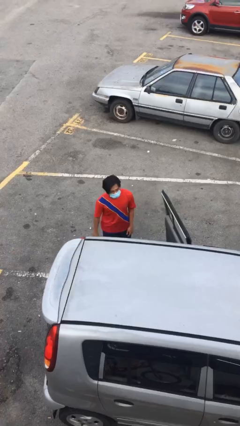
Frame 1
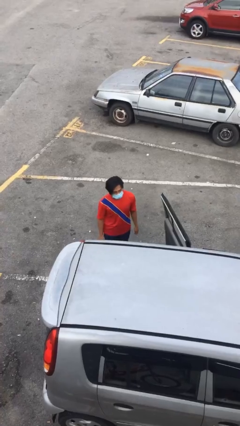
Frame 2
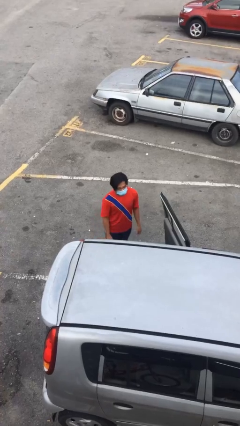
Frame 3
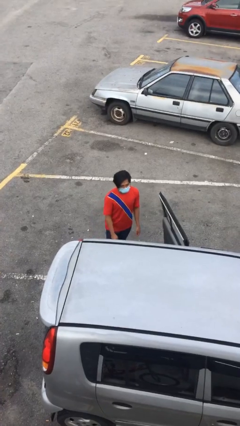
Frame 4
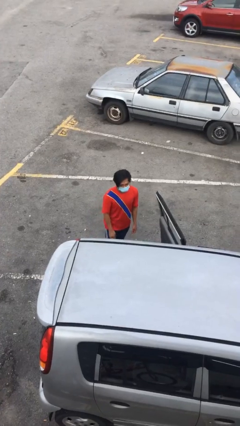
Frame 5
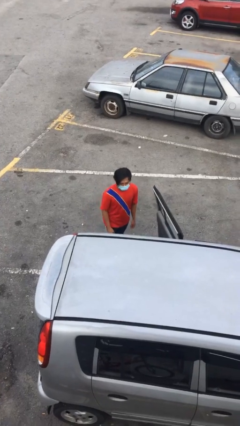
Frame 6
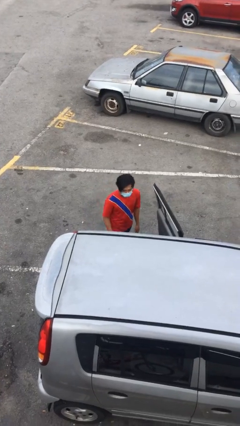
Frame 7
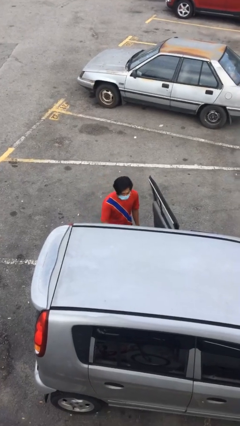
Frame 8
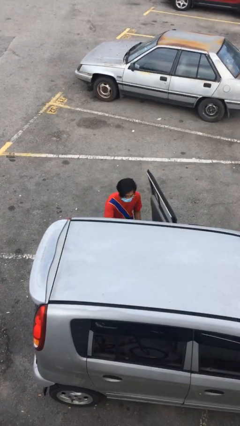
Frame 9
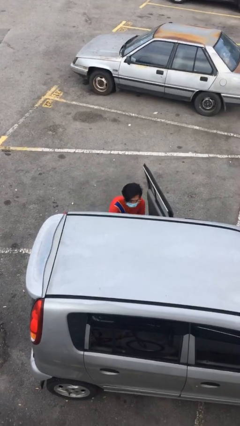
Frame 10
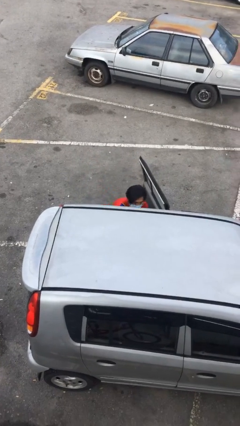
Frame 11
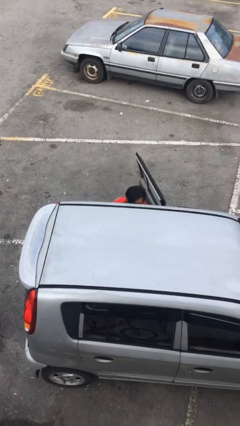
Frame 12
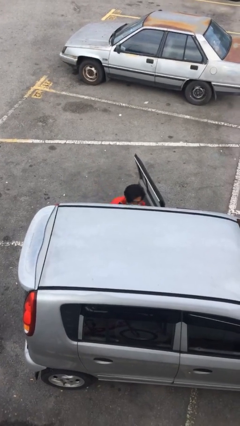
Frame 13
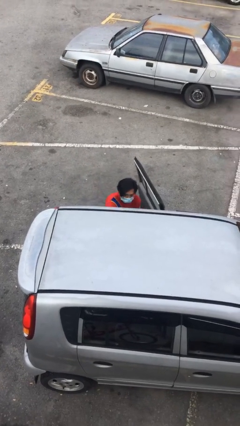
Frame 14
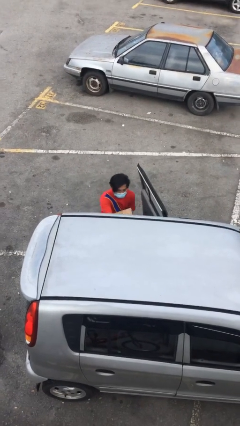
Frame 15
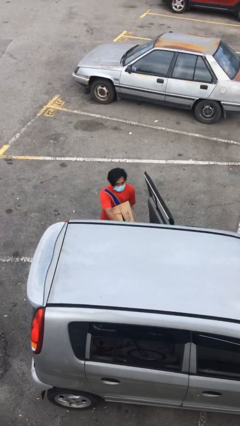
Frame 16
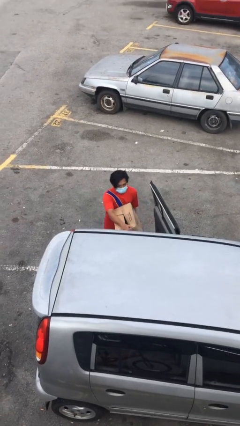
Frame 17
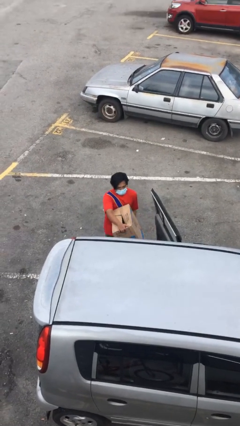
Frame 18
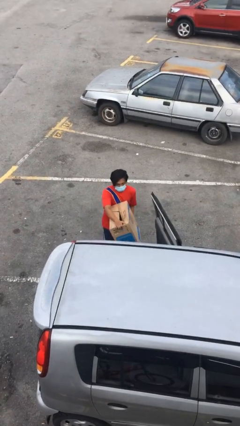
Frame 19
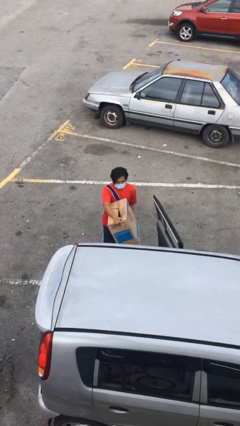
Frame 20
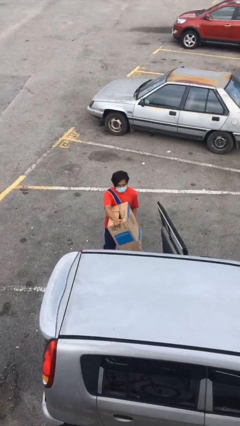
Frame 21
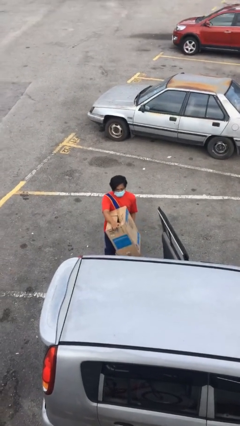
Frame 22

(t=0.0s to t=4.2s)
person unloads car

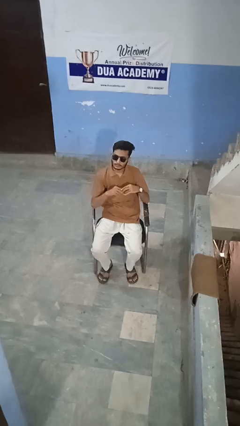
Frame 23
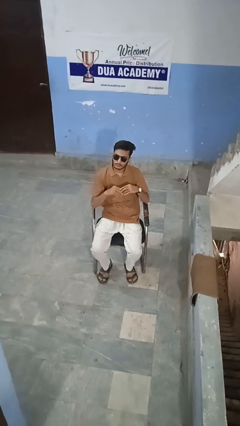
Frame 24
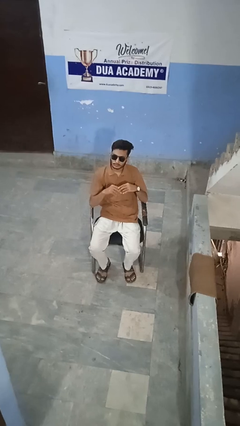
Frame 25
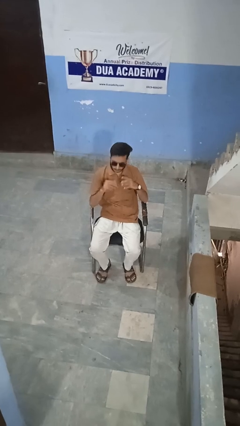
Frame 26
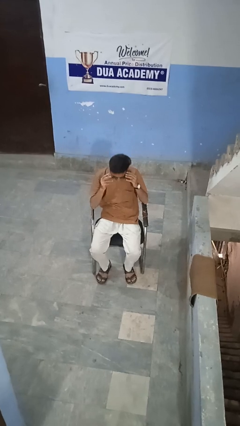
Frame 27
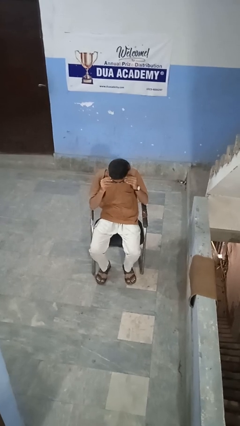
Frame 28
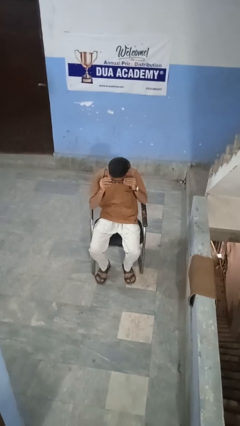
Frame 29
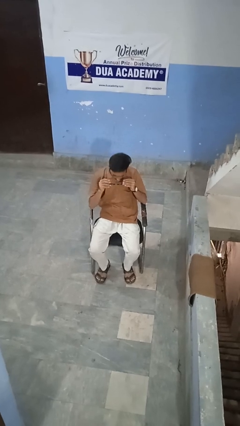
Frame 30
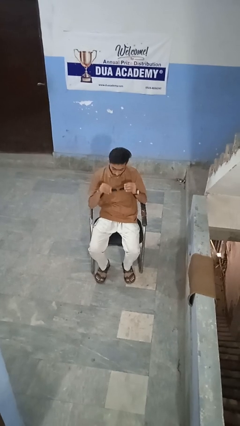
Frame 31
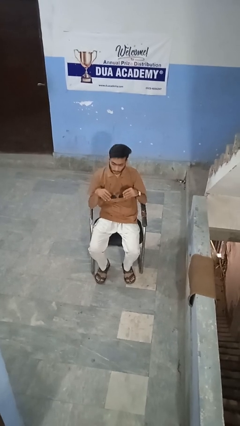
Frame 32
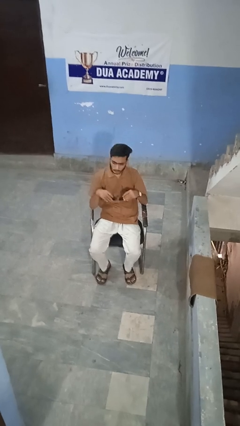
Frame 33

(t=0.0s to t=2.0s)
person takes off sunglasses

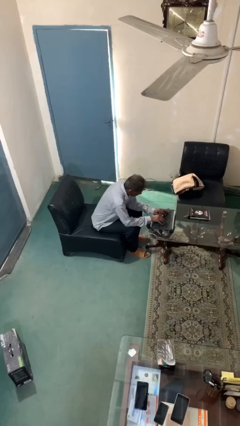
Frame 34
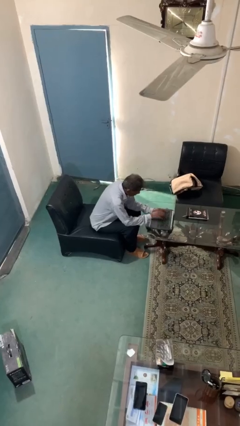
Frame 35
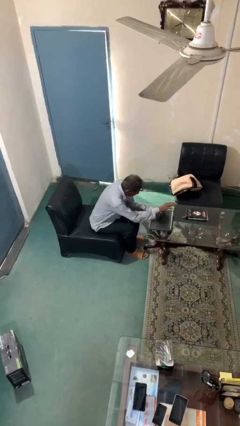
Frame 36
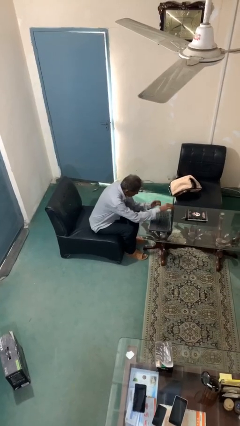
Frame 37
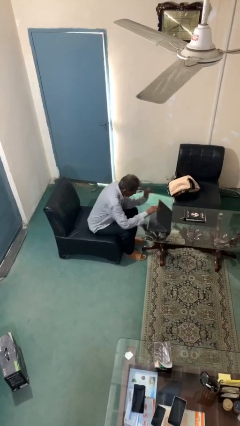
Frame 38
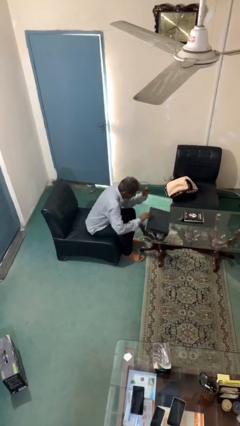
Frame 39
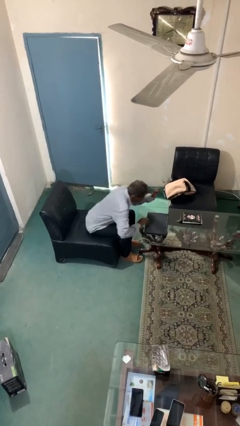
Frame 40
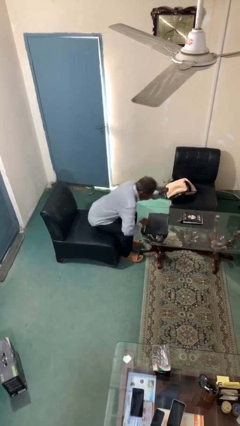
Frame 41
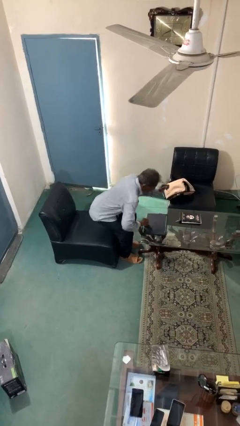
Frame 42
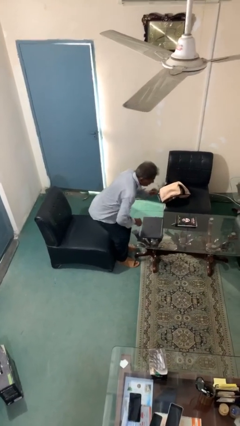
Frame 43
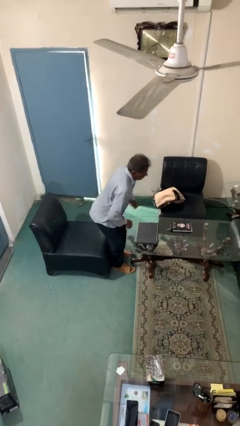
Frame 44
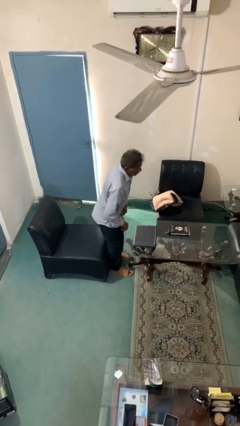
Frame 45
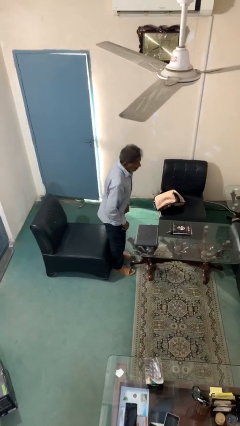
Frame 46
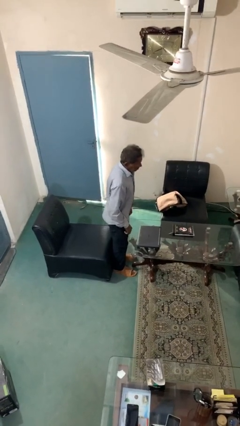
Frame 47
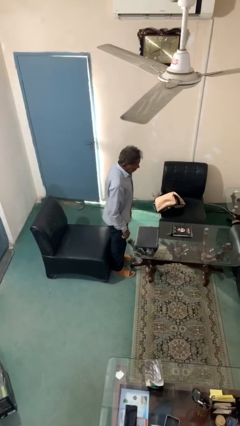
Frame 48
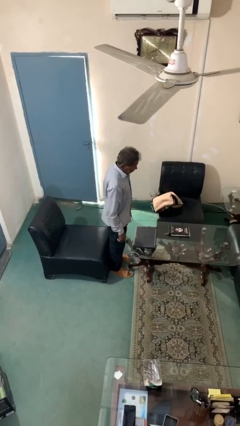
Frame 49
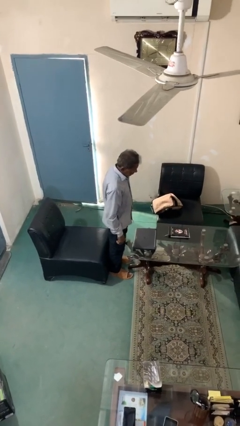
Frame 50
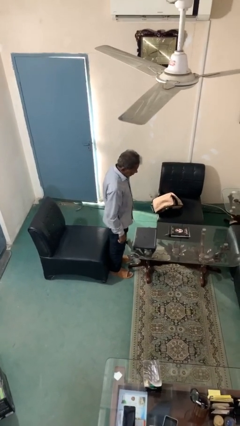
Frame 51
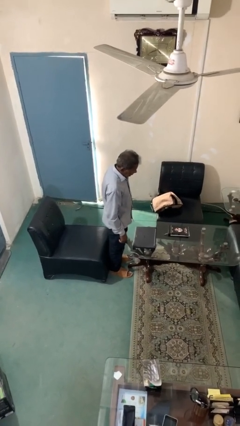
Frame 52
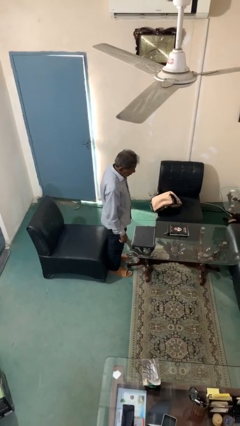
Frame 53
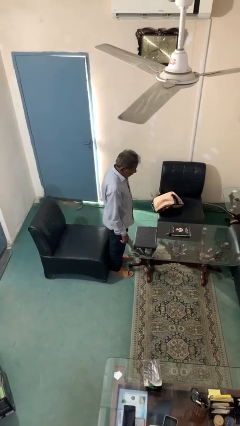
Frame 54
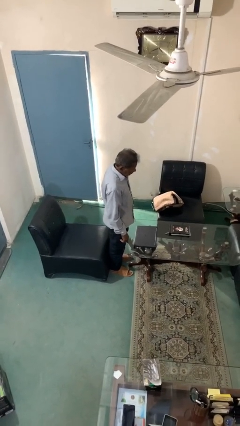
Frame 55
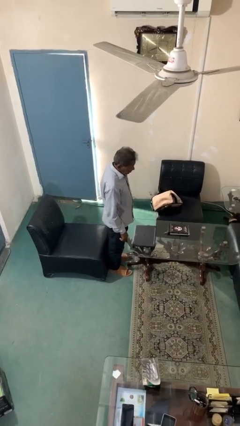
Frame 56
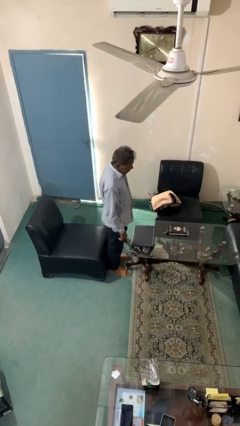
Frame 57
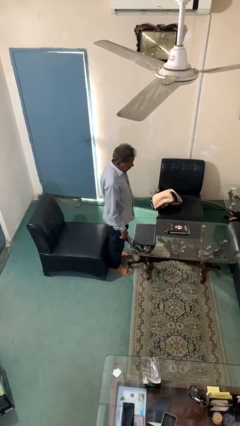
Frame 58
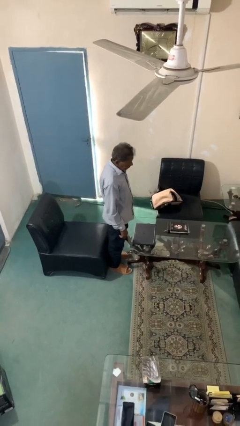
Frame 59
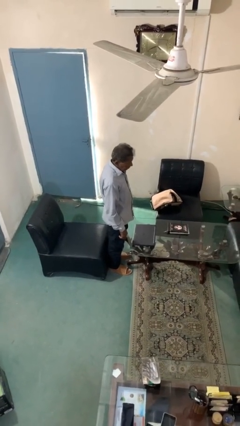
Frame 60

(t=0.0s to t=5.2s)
person stands up

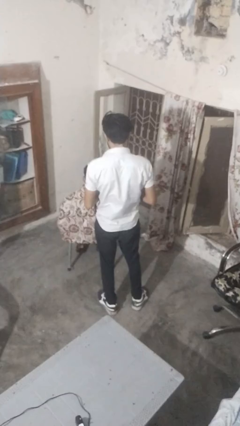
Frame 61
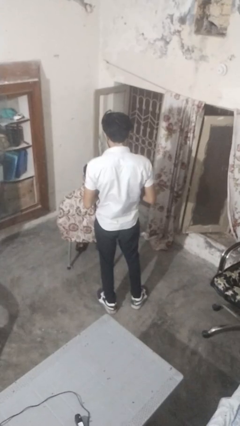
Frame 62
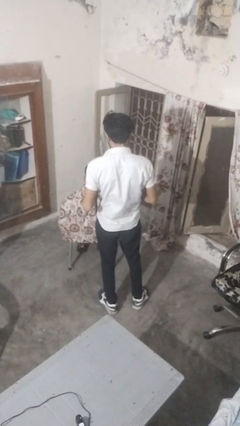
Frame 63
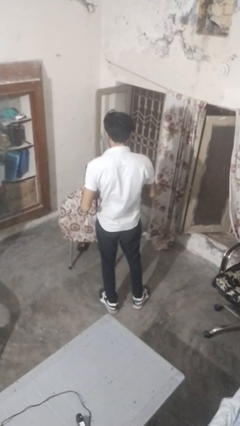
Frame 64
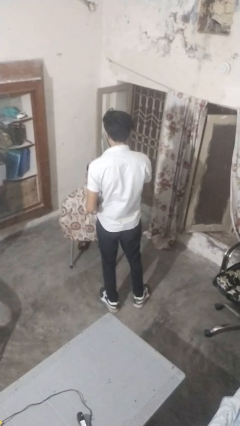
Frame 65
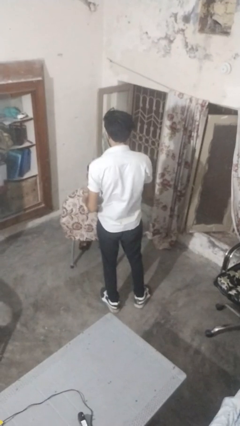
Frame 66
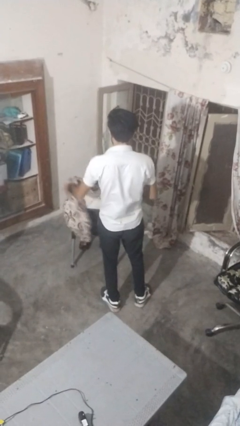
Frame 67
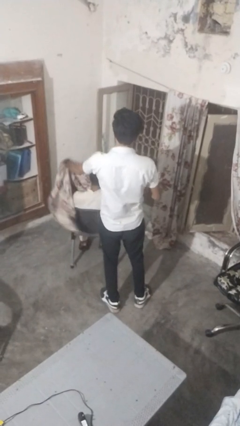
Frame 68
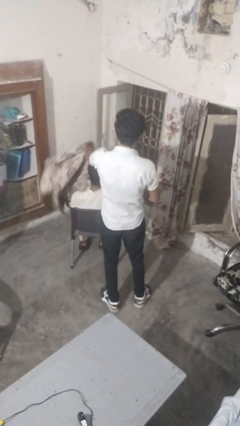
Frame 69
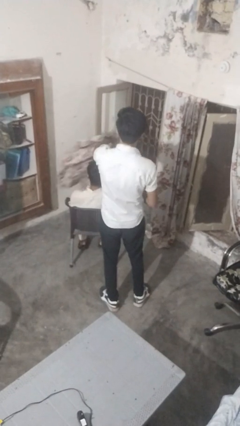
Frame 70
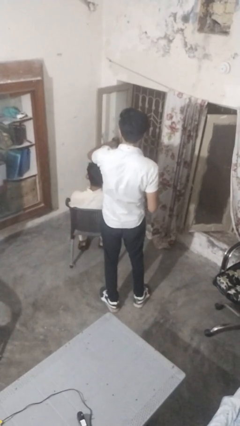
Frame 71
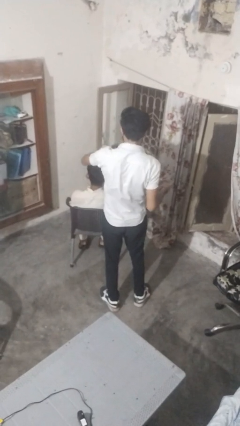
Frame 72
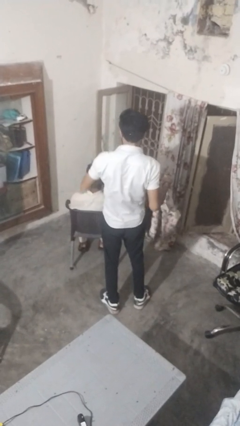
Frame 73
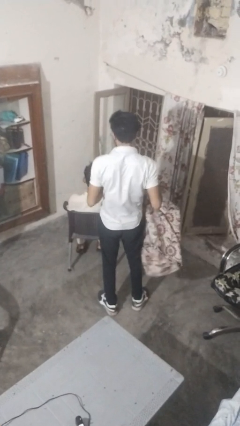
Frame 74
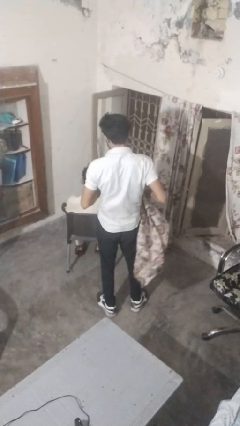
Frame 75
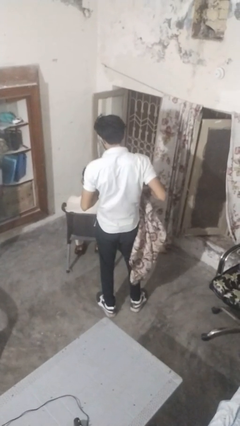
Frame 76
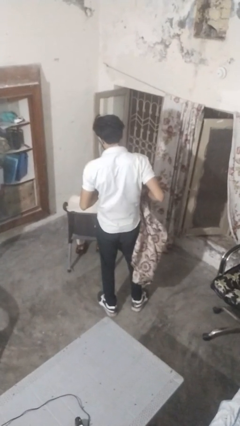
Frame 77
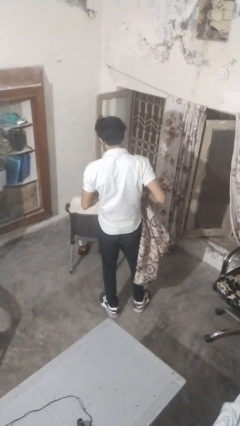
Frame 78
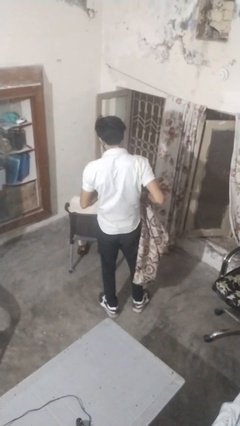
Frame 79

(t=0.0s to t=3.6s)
person uncovers friend with blanket

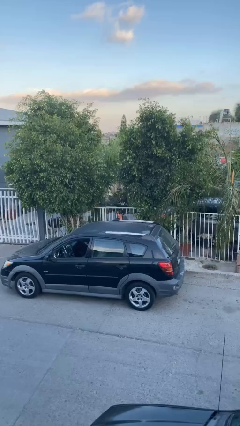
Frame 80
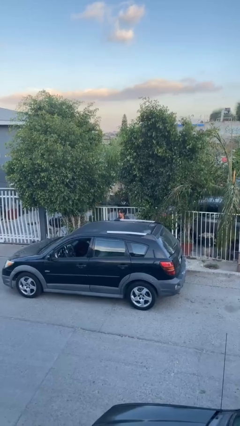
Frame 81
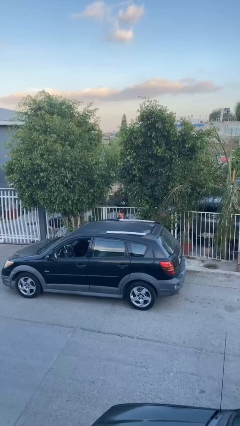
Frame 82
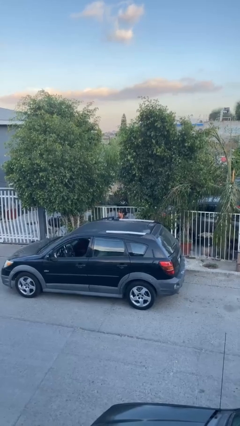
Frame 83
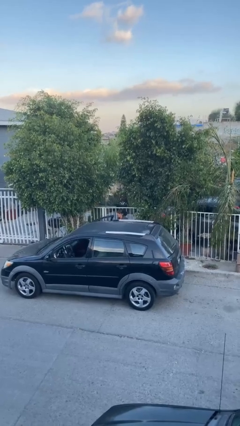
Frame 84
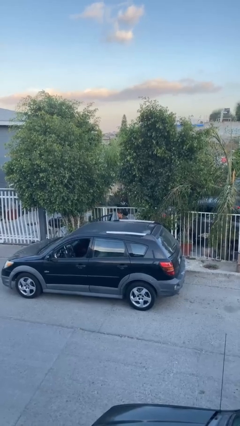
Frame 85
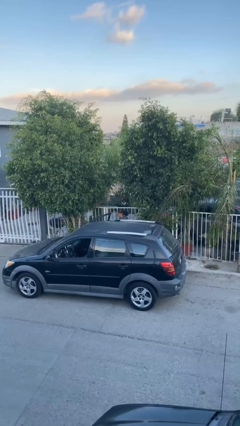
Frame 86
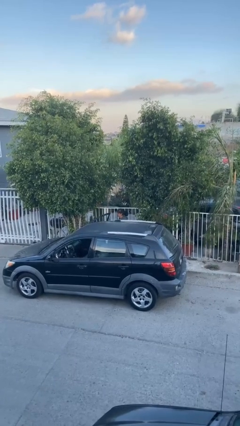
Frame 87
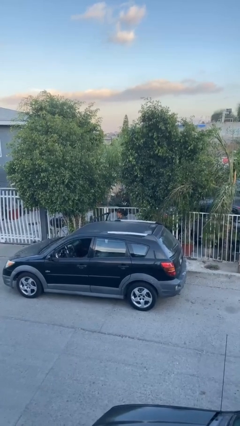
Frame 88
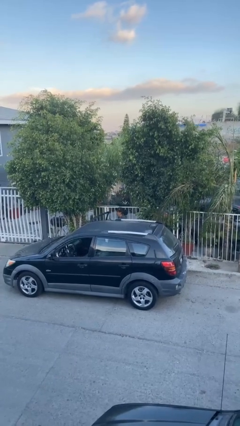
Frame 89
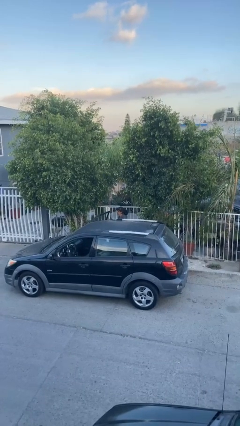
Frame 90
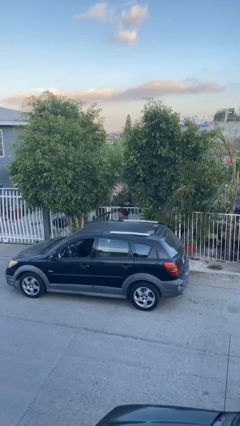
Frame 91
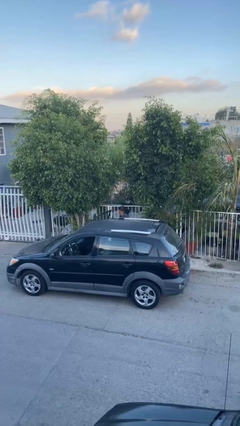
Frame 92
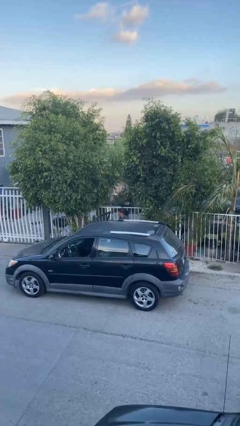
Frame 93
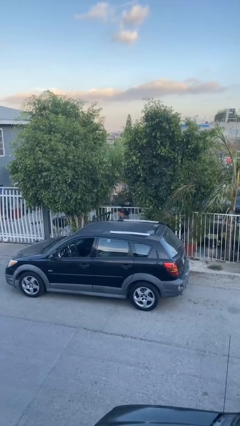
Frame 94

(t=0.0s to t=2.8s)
person opens car door
